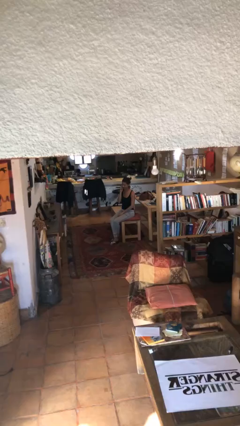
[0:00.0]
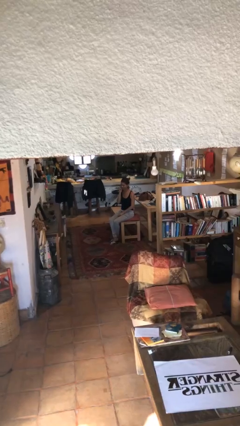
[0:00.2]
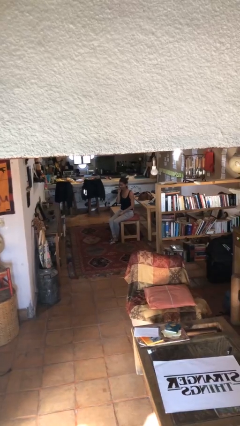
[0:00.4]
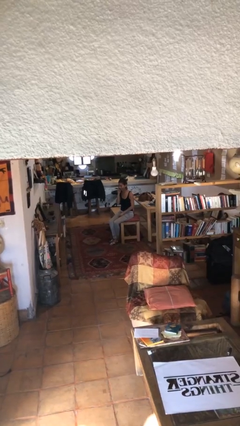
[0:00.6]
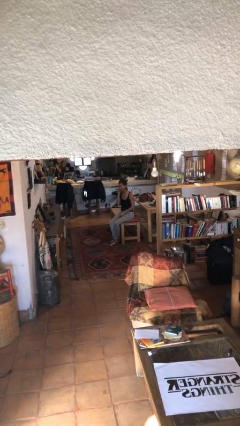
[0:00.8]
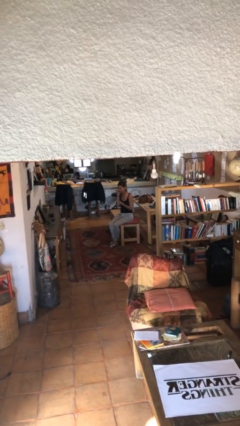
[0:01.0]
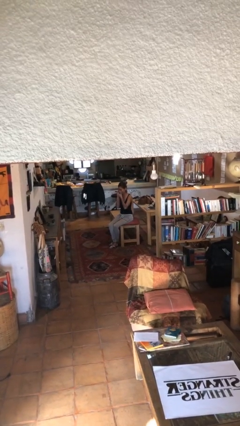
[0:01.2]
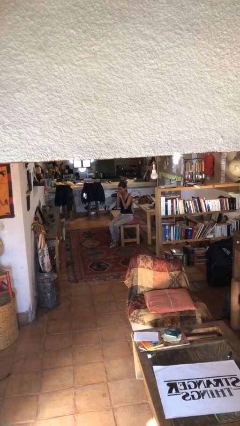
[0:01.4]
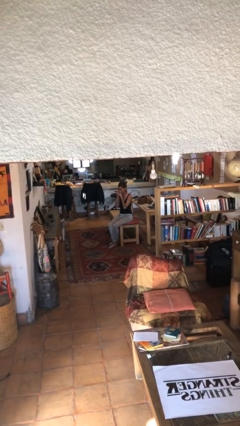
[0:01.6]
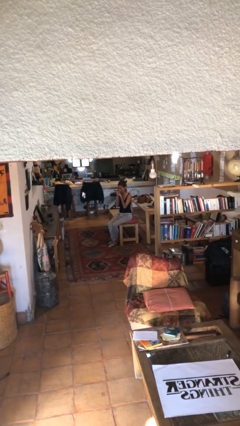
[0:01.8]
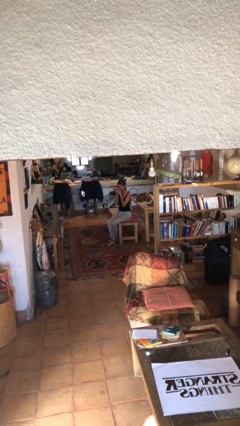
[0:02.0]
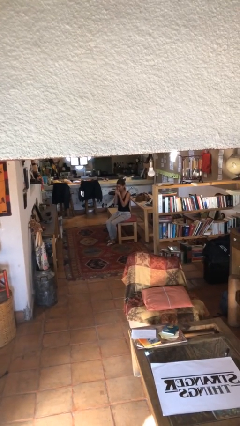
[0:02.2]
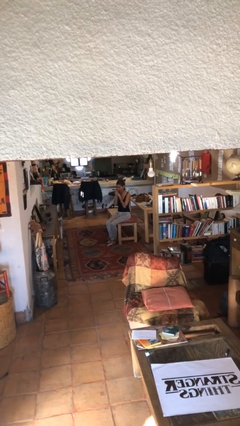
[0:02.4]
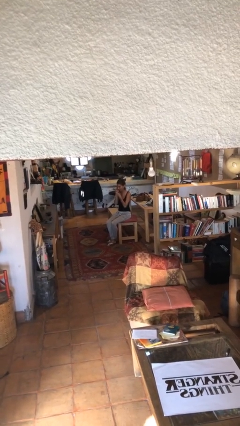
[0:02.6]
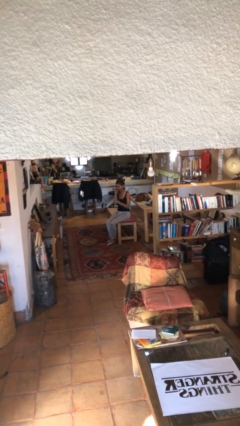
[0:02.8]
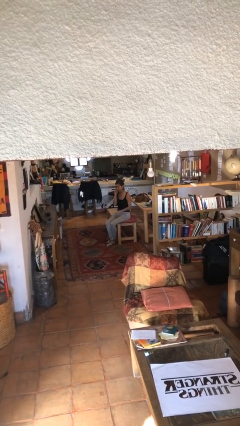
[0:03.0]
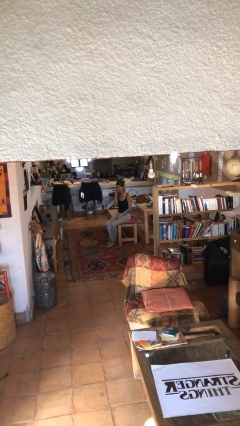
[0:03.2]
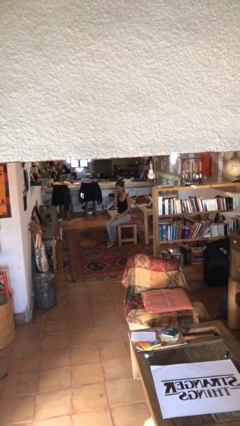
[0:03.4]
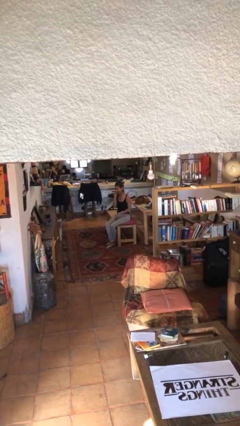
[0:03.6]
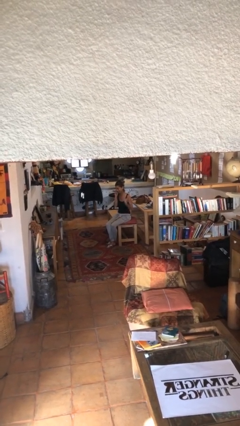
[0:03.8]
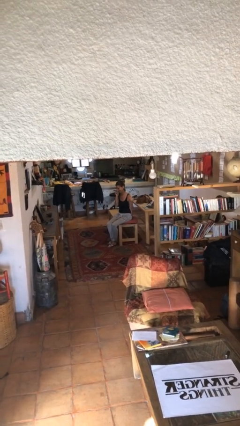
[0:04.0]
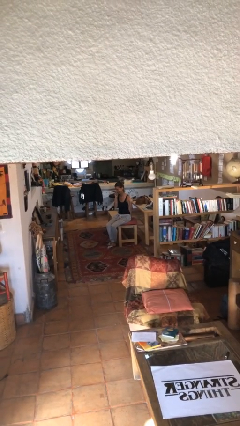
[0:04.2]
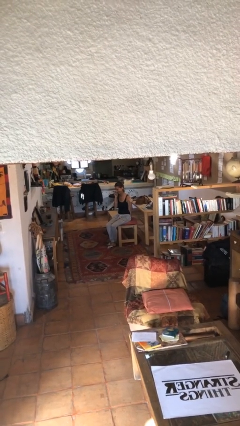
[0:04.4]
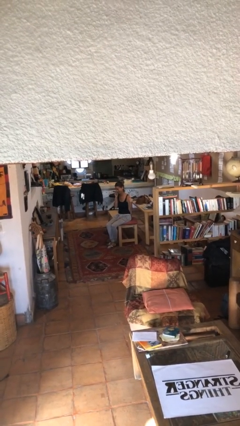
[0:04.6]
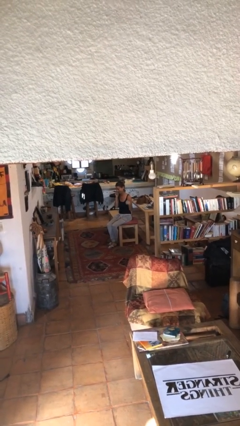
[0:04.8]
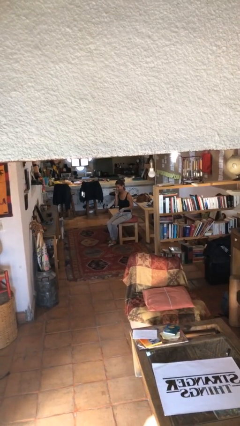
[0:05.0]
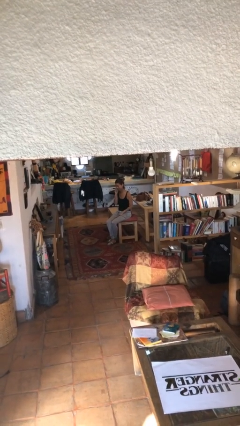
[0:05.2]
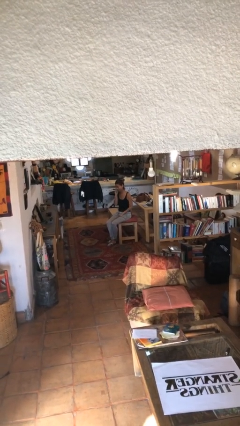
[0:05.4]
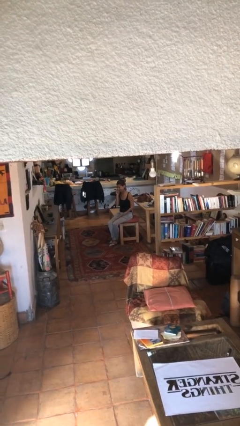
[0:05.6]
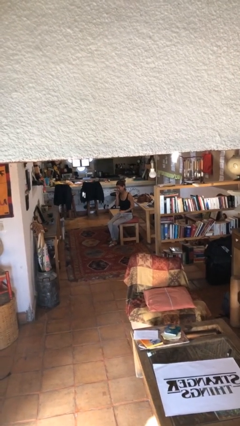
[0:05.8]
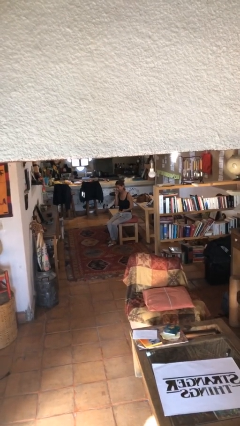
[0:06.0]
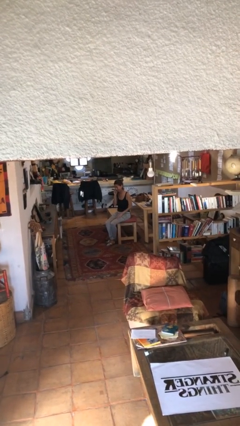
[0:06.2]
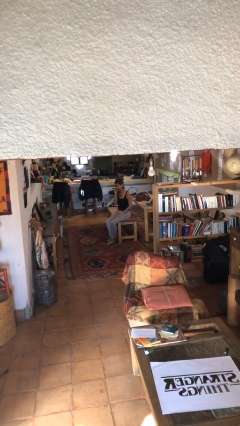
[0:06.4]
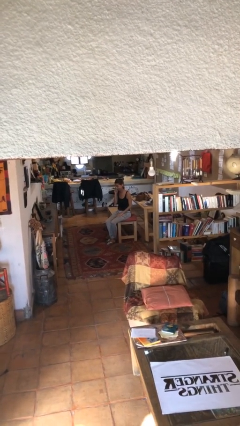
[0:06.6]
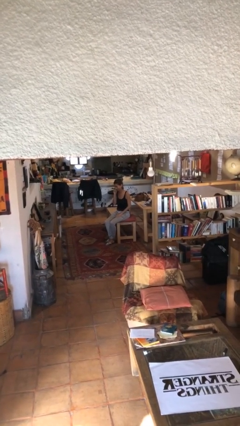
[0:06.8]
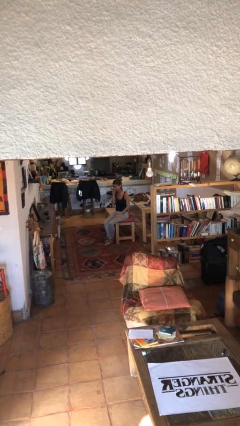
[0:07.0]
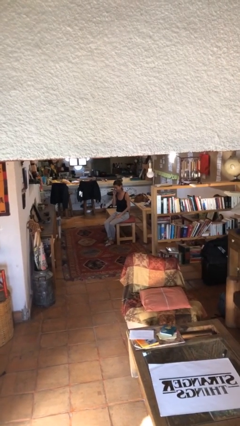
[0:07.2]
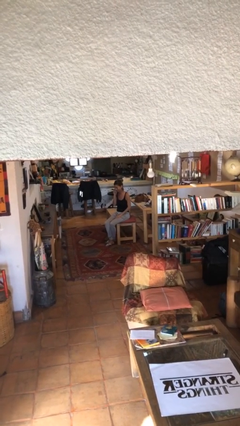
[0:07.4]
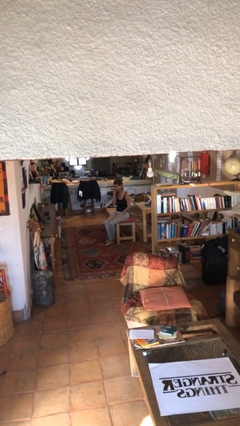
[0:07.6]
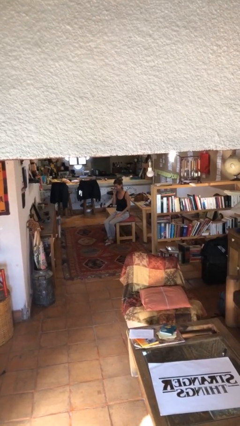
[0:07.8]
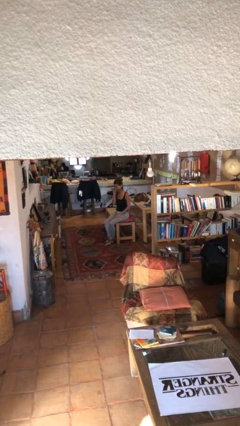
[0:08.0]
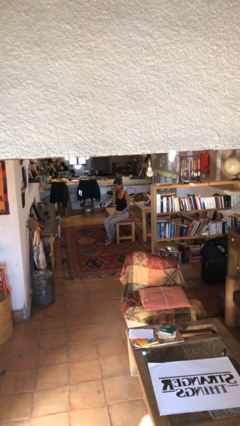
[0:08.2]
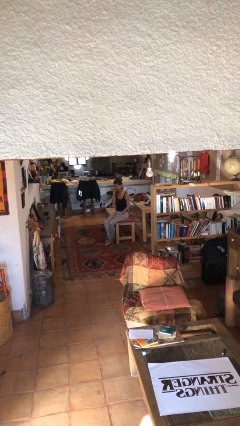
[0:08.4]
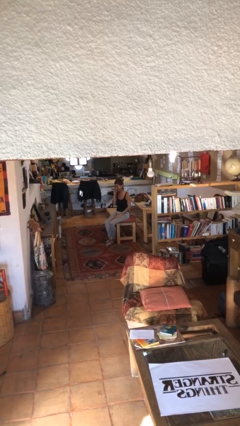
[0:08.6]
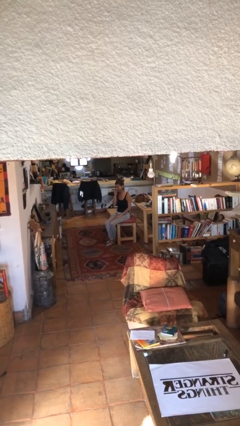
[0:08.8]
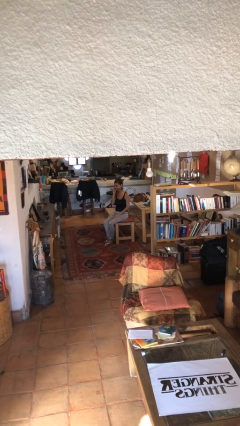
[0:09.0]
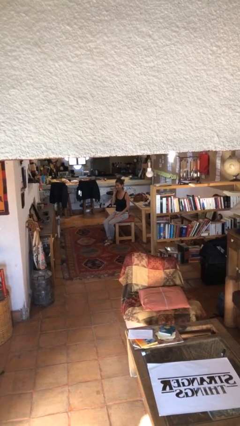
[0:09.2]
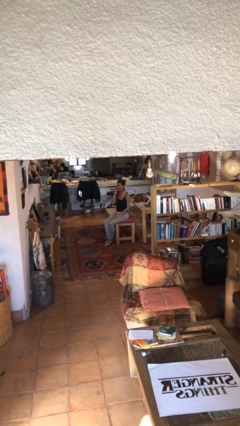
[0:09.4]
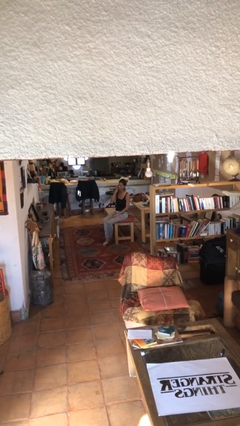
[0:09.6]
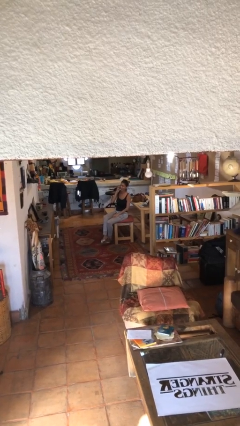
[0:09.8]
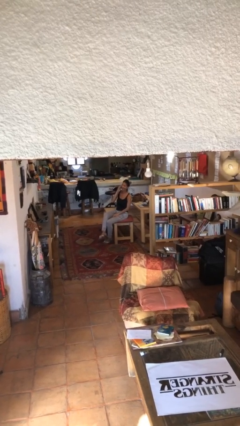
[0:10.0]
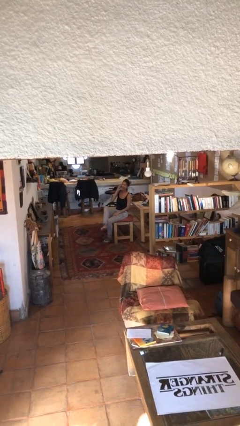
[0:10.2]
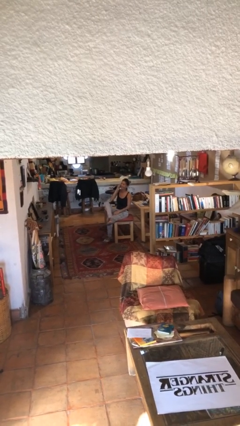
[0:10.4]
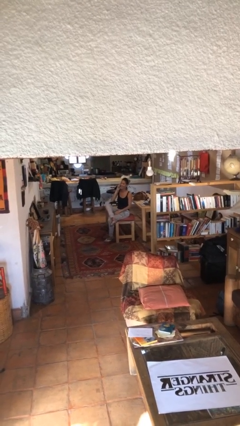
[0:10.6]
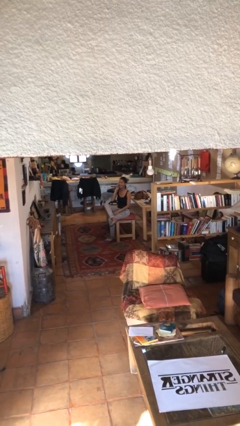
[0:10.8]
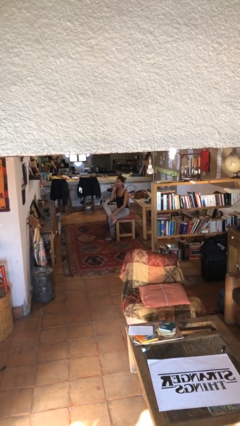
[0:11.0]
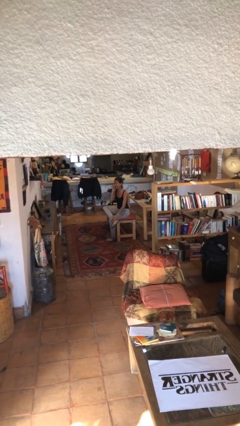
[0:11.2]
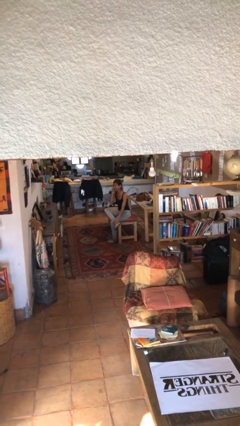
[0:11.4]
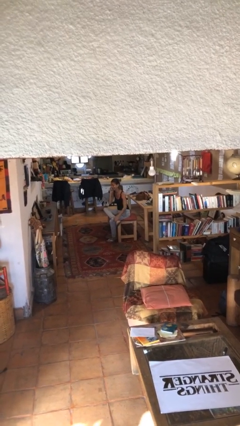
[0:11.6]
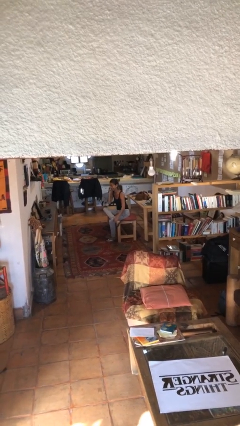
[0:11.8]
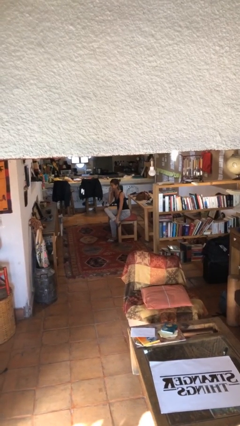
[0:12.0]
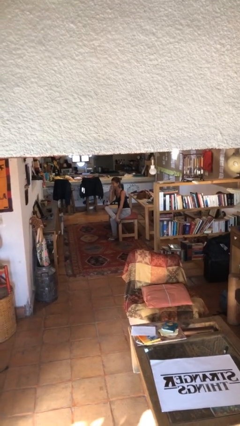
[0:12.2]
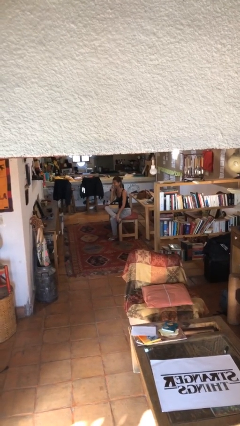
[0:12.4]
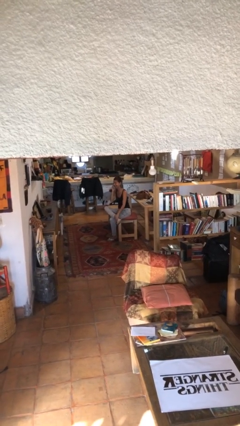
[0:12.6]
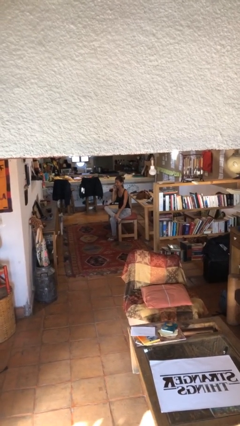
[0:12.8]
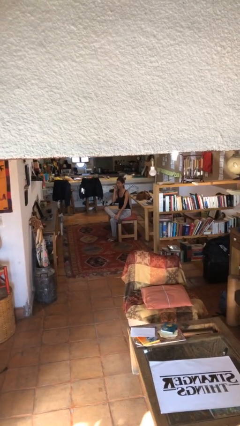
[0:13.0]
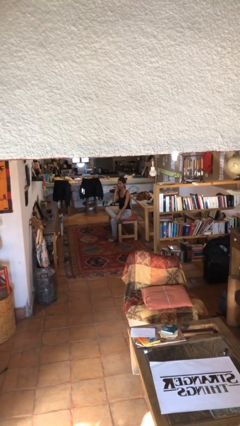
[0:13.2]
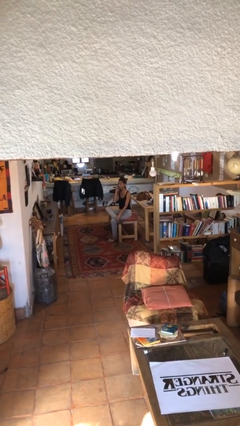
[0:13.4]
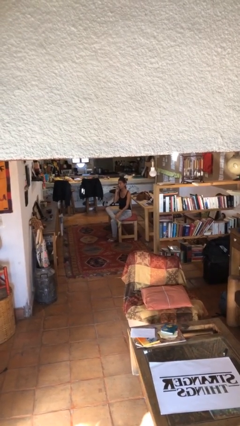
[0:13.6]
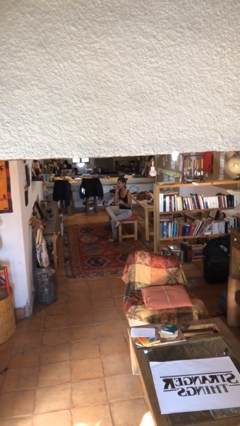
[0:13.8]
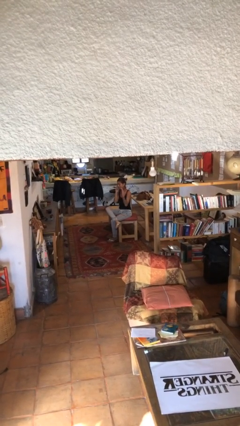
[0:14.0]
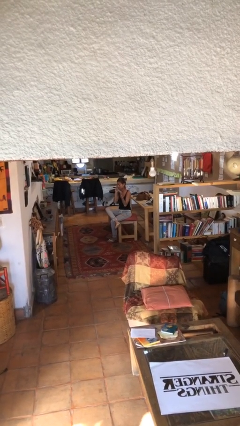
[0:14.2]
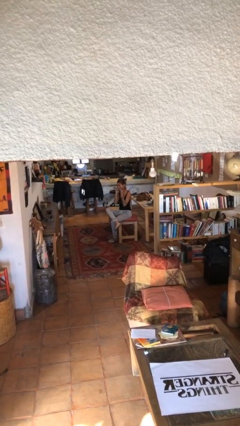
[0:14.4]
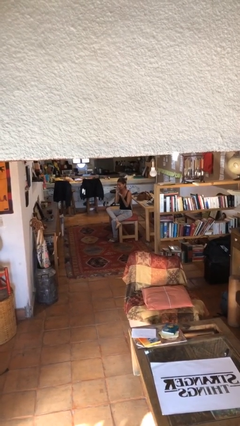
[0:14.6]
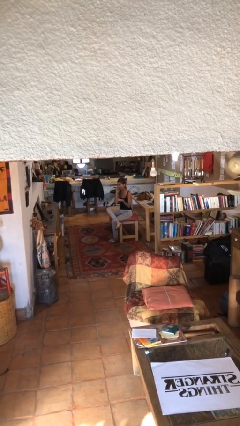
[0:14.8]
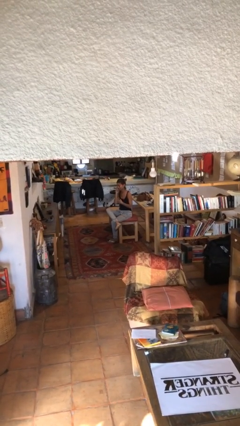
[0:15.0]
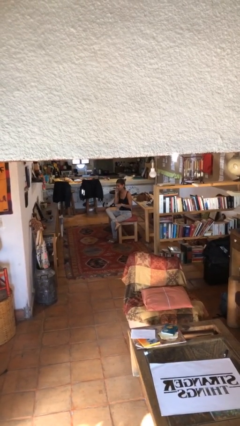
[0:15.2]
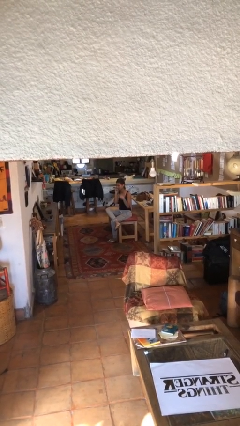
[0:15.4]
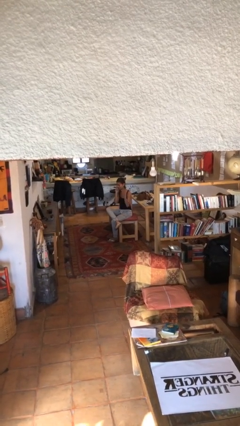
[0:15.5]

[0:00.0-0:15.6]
person talks on phone

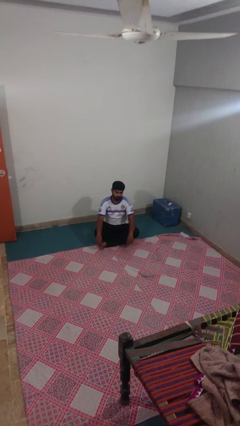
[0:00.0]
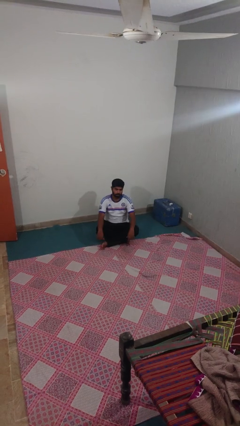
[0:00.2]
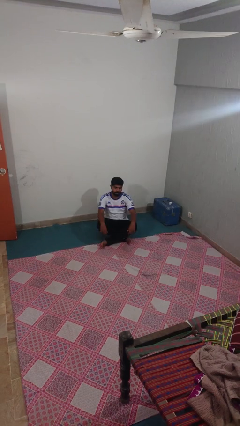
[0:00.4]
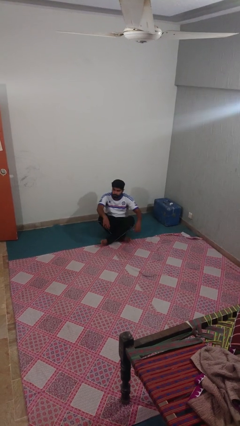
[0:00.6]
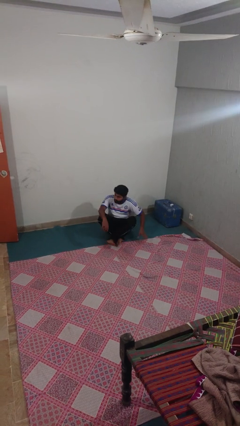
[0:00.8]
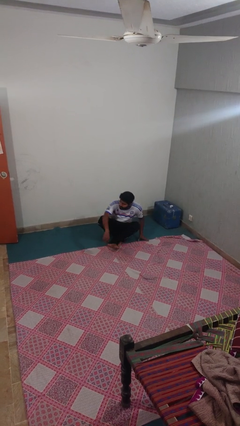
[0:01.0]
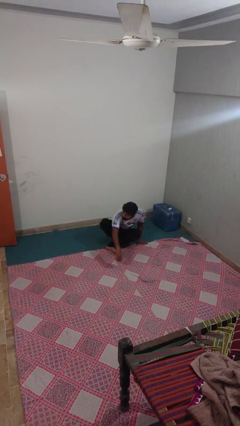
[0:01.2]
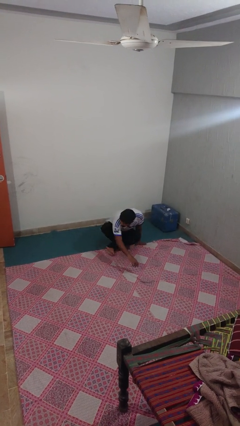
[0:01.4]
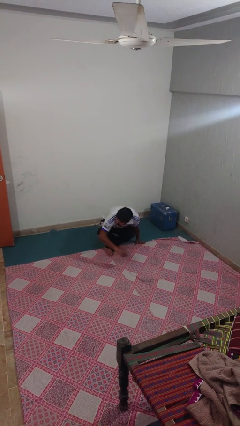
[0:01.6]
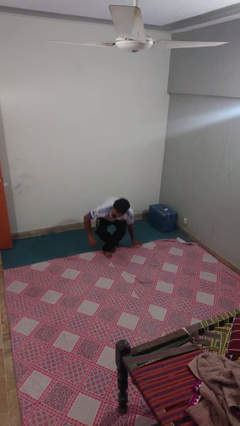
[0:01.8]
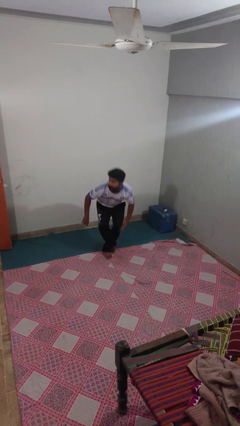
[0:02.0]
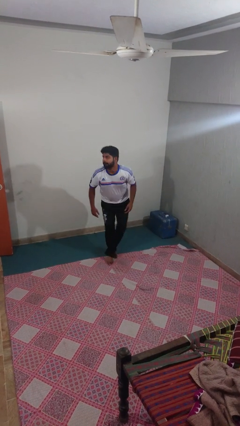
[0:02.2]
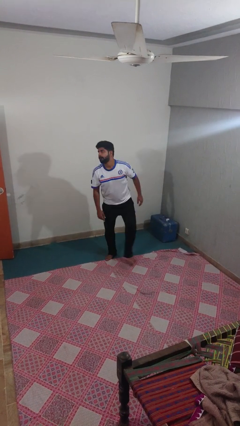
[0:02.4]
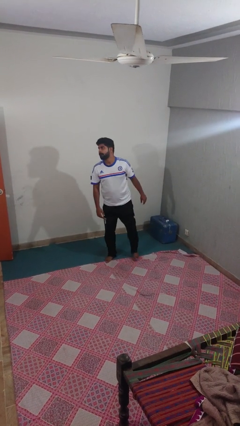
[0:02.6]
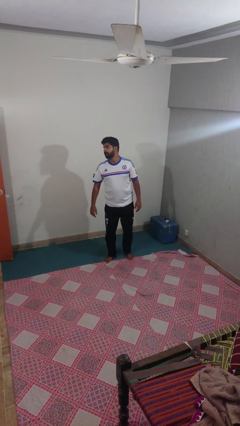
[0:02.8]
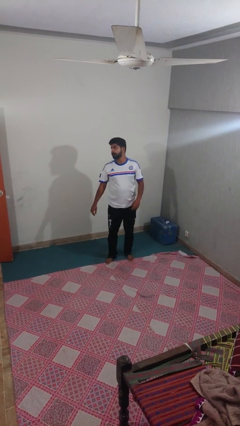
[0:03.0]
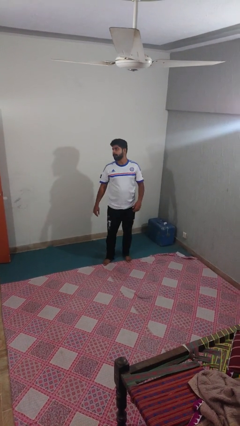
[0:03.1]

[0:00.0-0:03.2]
person stands up from floor
